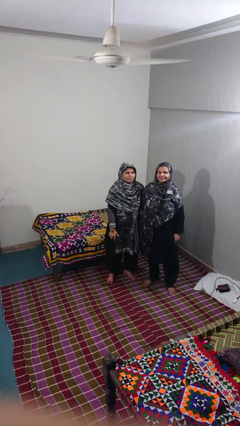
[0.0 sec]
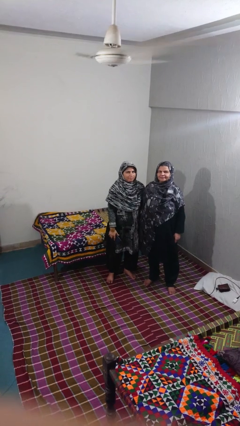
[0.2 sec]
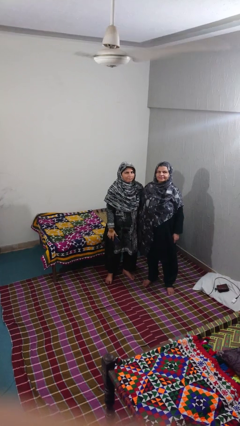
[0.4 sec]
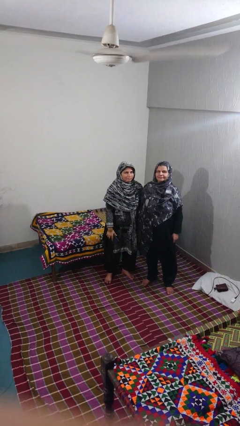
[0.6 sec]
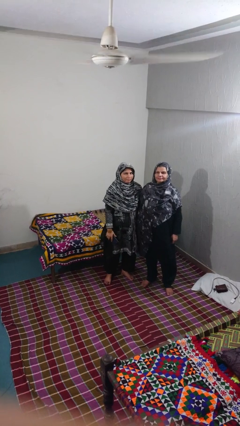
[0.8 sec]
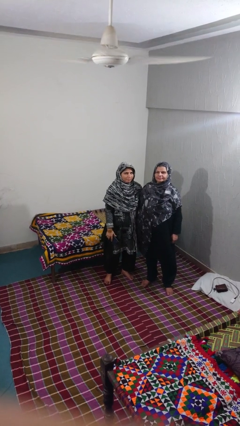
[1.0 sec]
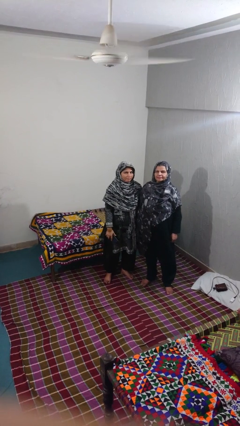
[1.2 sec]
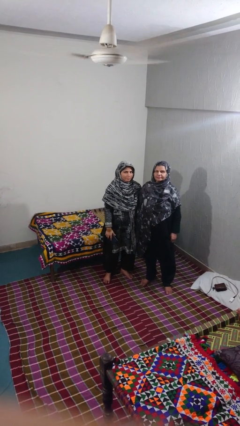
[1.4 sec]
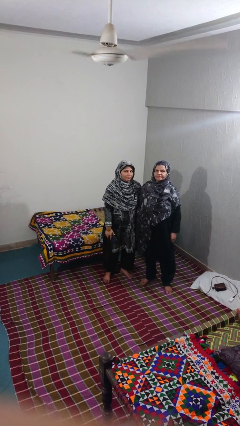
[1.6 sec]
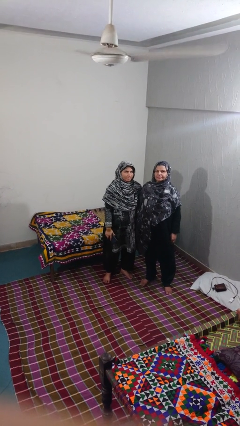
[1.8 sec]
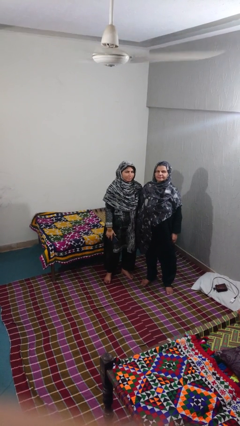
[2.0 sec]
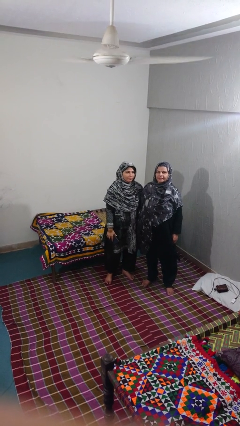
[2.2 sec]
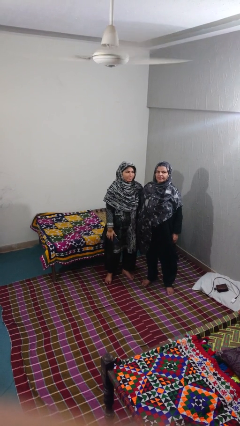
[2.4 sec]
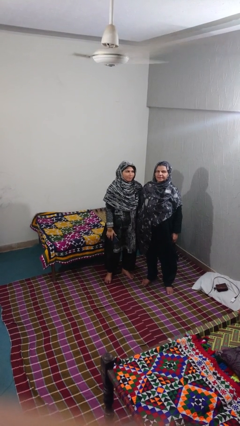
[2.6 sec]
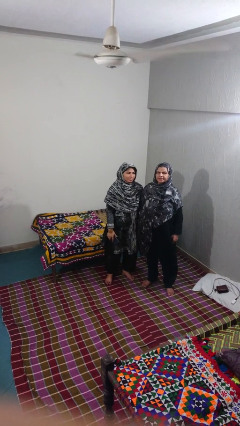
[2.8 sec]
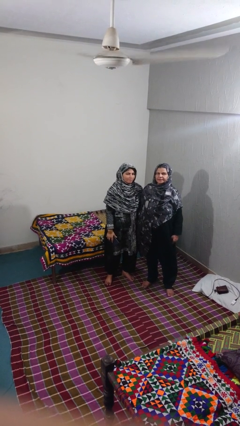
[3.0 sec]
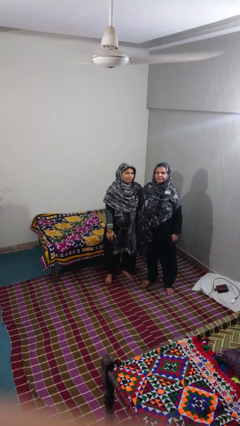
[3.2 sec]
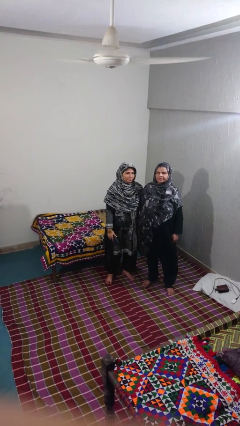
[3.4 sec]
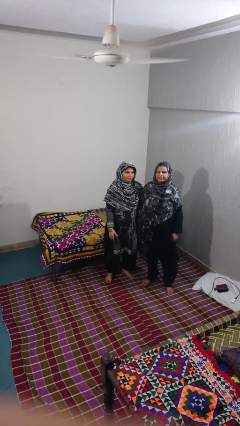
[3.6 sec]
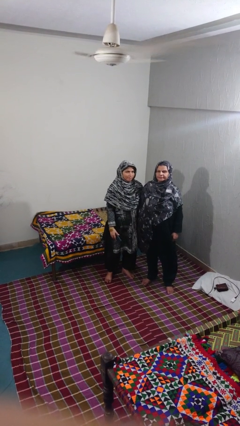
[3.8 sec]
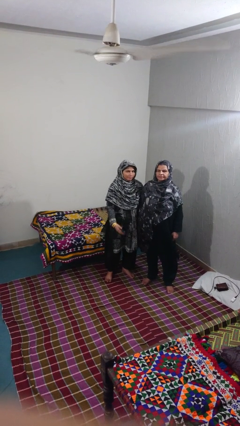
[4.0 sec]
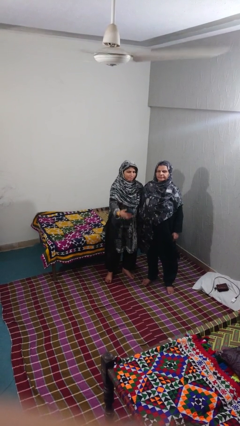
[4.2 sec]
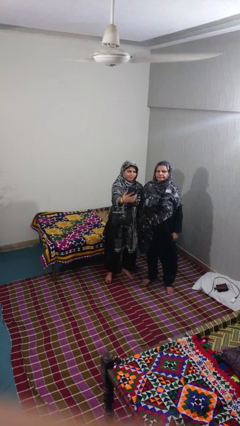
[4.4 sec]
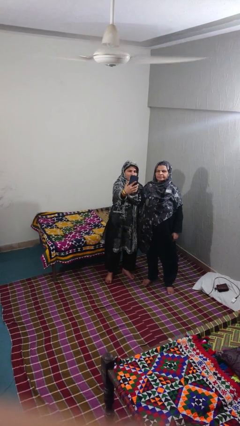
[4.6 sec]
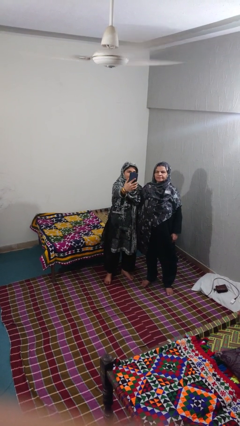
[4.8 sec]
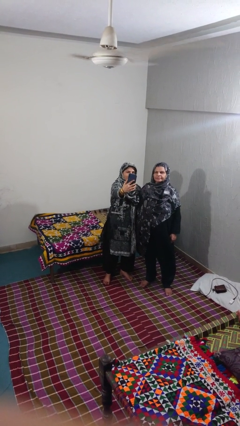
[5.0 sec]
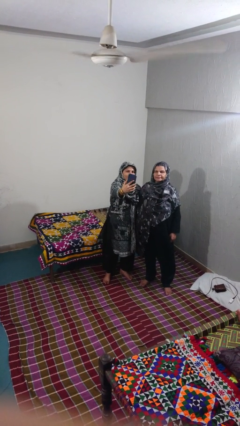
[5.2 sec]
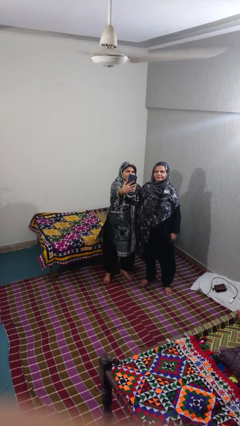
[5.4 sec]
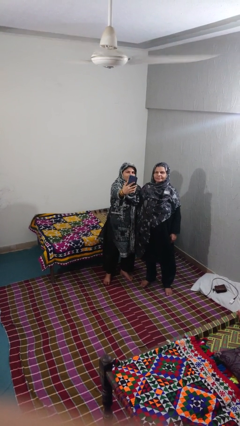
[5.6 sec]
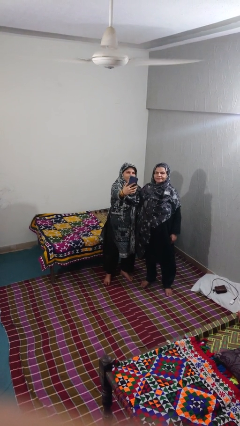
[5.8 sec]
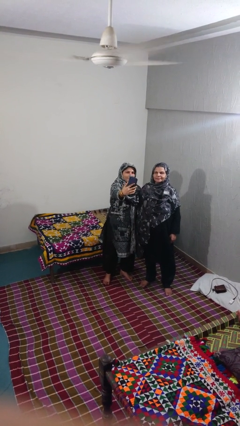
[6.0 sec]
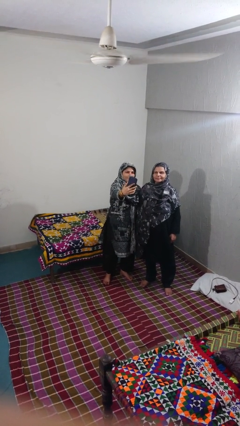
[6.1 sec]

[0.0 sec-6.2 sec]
person takes selfie with person

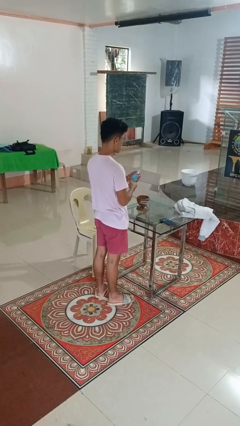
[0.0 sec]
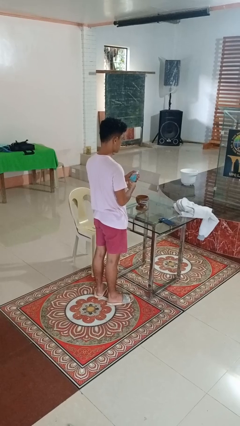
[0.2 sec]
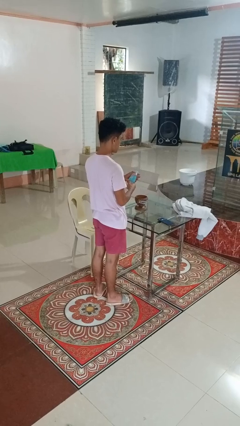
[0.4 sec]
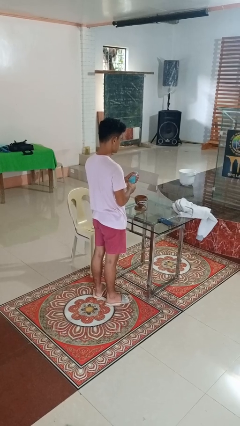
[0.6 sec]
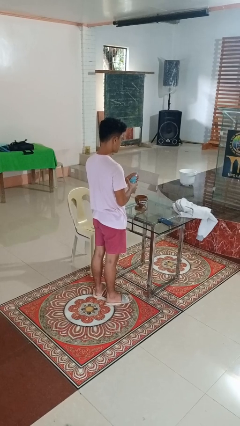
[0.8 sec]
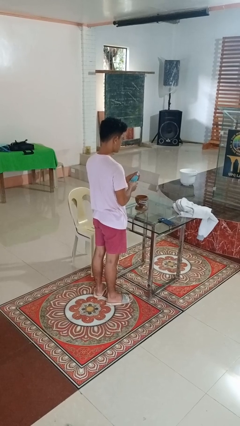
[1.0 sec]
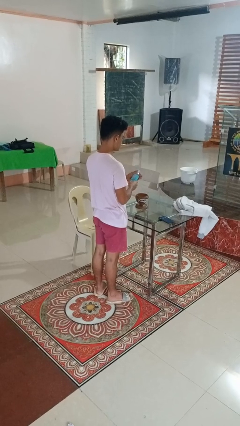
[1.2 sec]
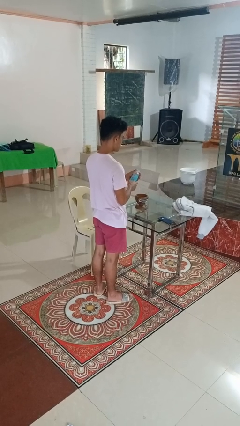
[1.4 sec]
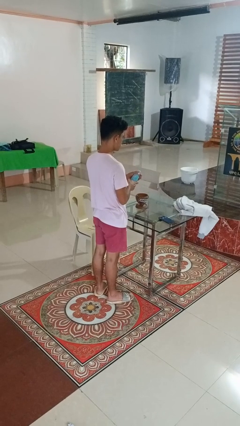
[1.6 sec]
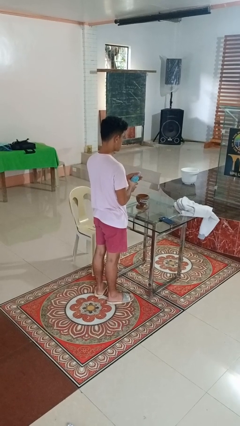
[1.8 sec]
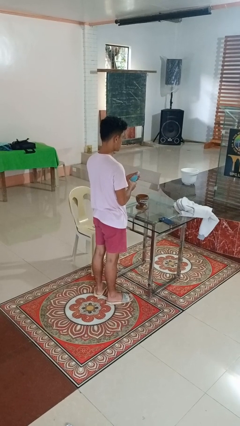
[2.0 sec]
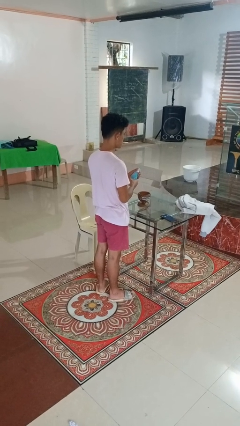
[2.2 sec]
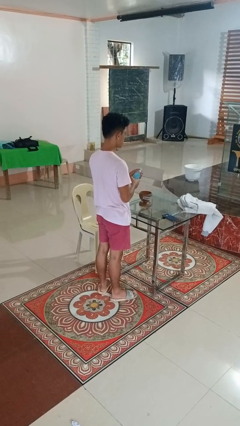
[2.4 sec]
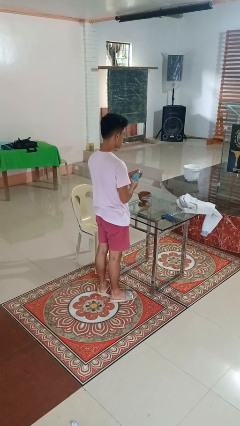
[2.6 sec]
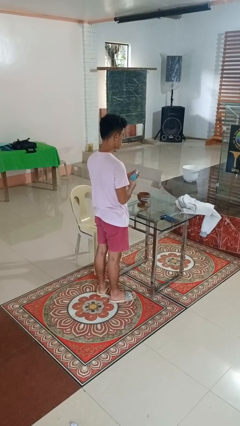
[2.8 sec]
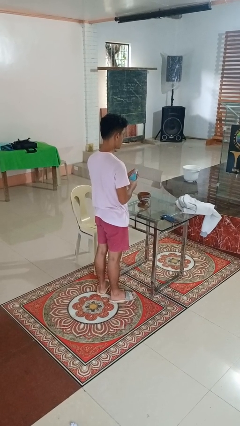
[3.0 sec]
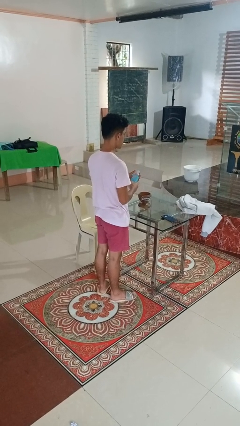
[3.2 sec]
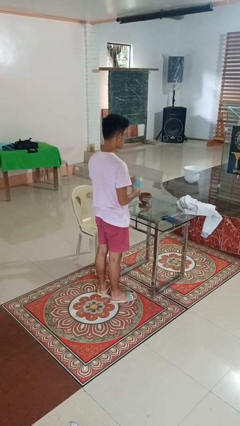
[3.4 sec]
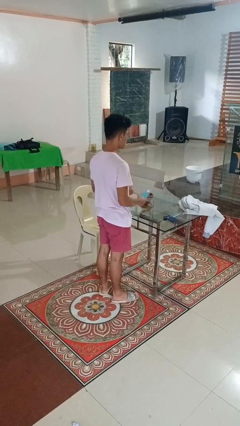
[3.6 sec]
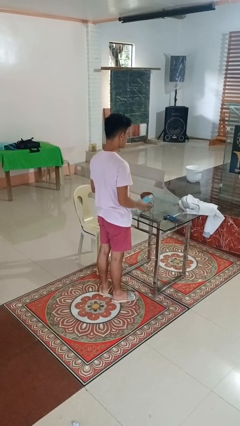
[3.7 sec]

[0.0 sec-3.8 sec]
person squeezes object

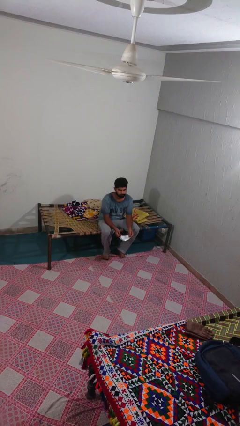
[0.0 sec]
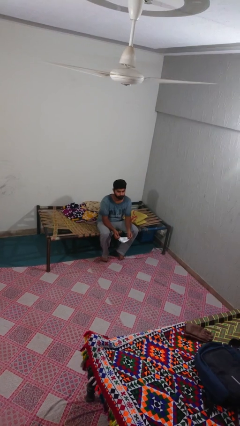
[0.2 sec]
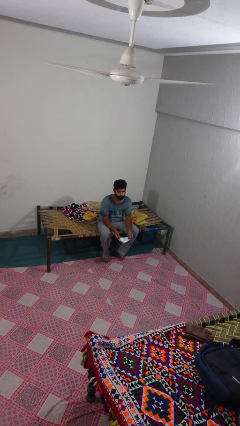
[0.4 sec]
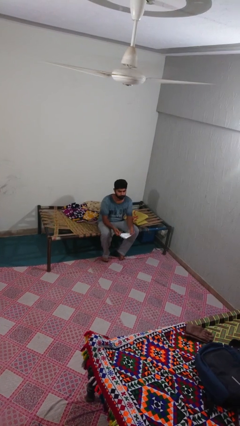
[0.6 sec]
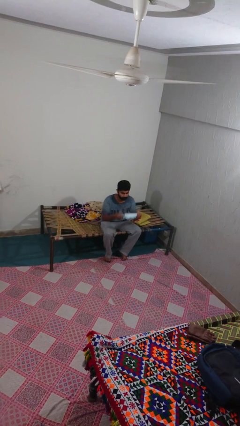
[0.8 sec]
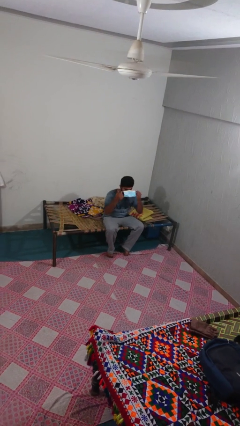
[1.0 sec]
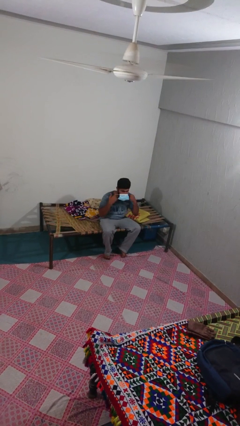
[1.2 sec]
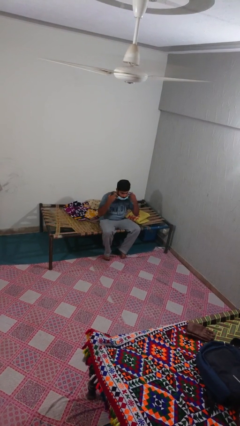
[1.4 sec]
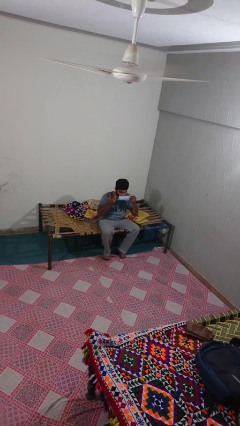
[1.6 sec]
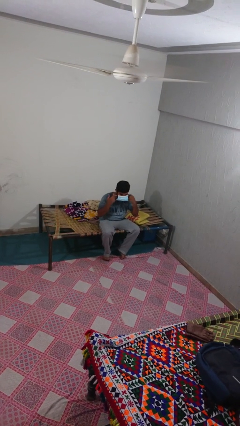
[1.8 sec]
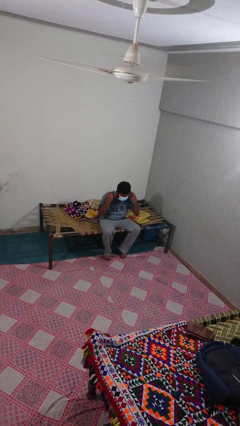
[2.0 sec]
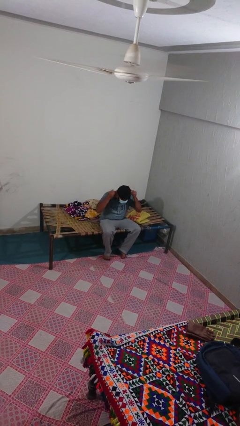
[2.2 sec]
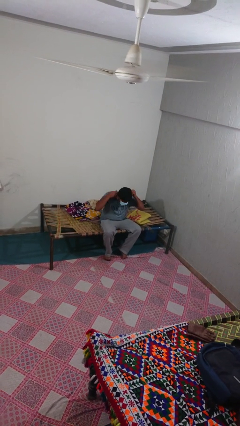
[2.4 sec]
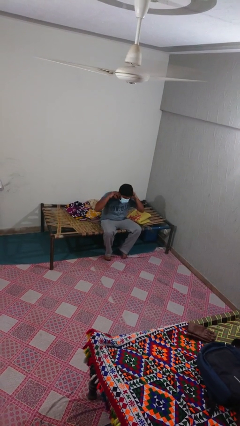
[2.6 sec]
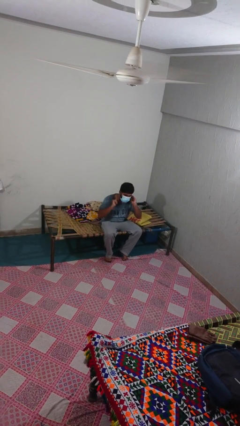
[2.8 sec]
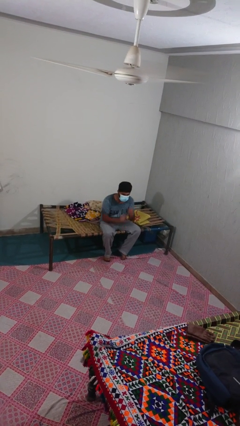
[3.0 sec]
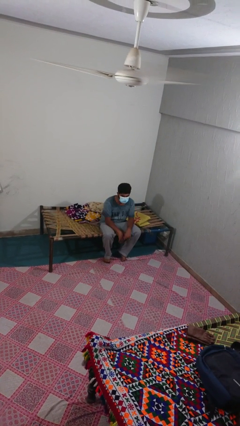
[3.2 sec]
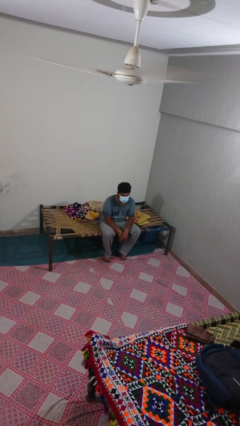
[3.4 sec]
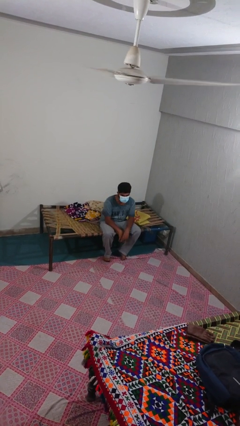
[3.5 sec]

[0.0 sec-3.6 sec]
person puts on facemask

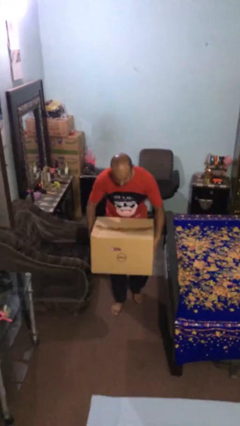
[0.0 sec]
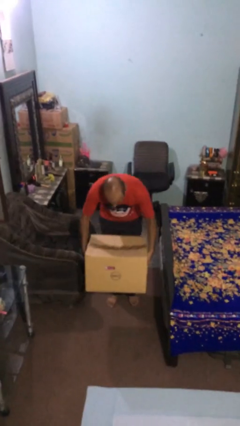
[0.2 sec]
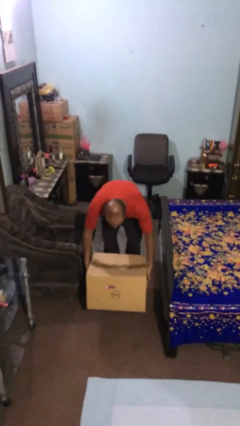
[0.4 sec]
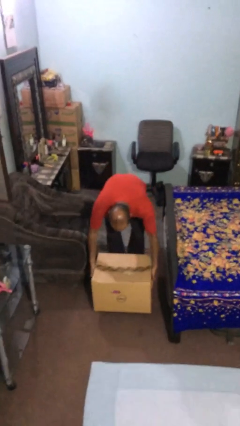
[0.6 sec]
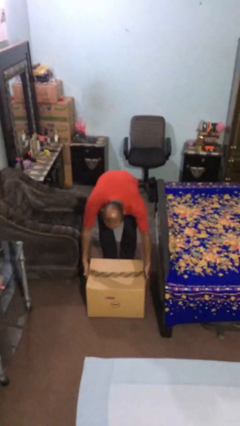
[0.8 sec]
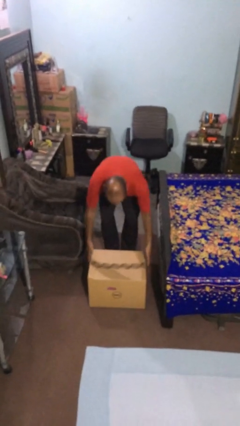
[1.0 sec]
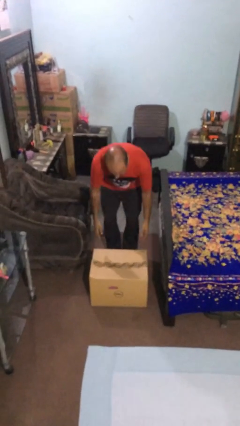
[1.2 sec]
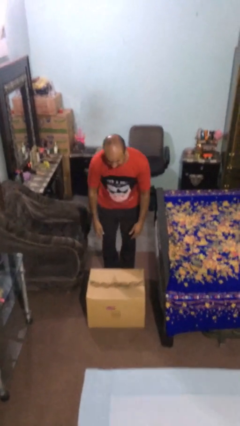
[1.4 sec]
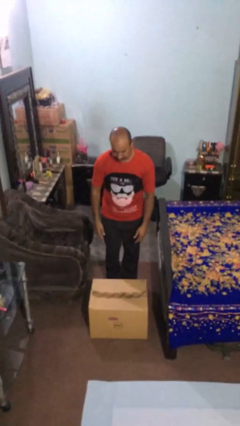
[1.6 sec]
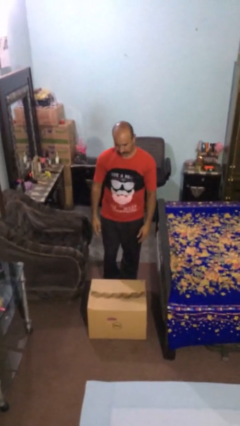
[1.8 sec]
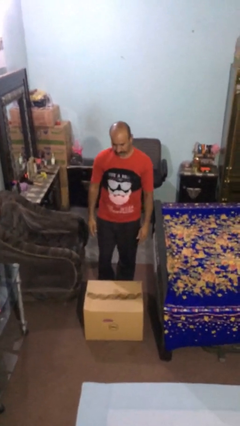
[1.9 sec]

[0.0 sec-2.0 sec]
person puts down object on floor

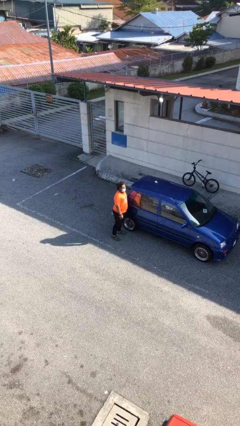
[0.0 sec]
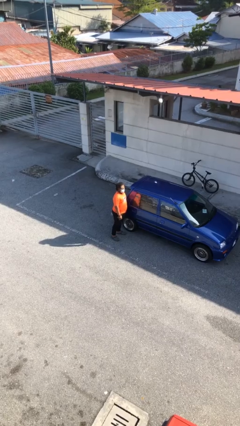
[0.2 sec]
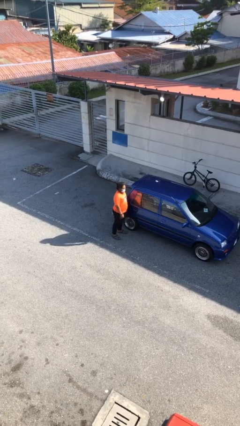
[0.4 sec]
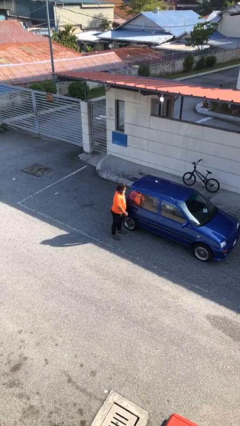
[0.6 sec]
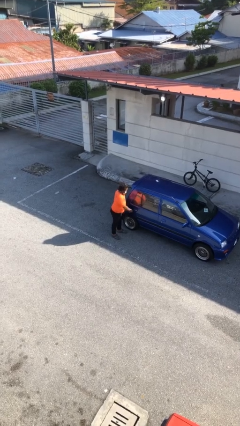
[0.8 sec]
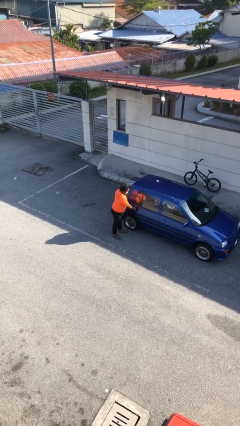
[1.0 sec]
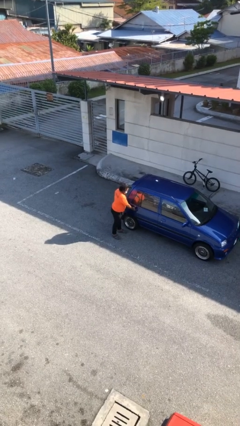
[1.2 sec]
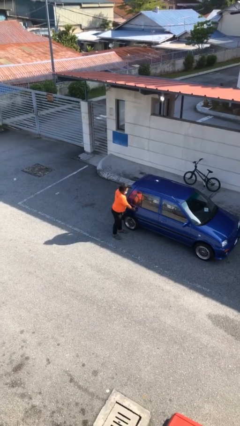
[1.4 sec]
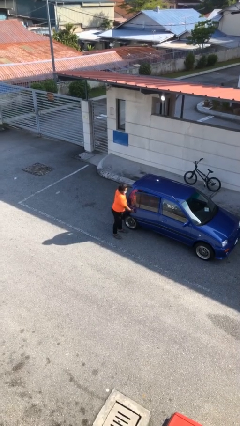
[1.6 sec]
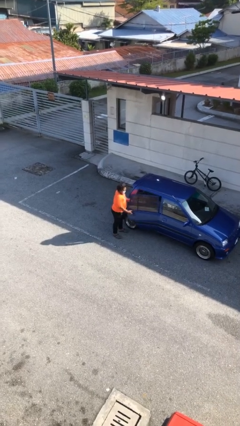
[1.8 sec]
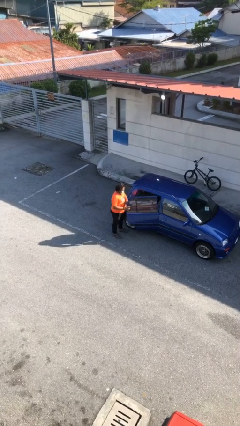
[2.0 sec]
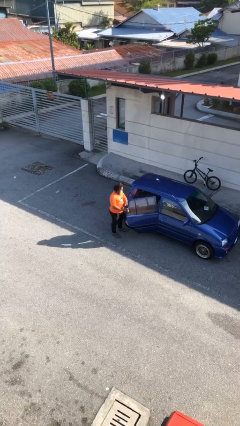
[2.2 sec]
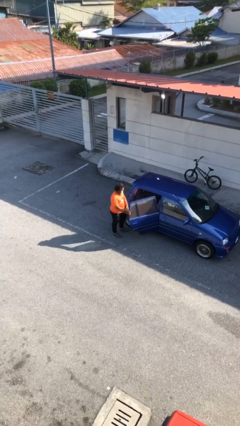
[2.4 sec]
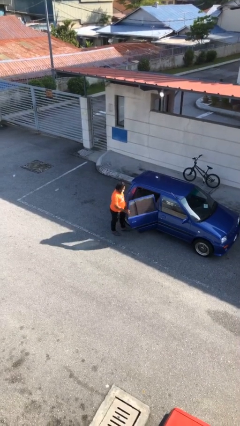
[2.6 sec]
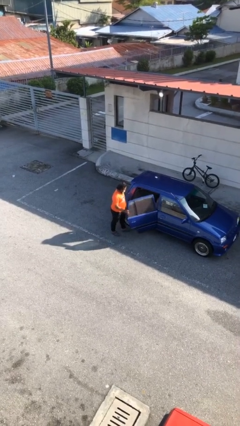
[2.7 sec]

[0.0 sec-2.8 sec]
person opens car door
